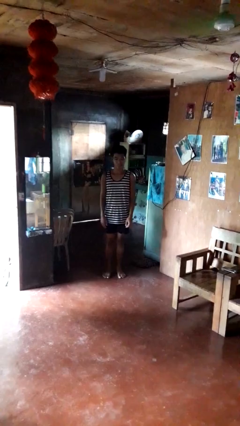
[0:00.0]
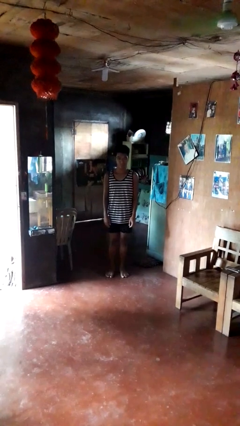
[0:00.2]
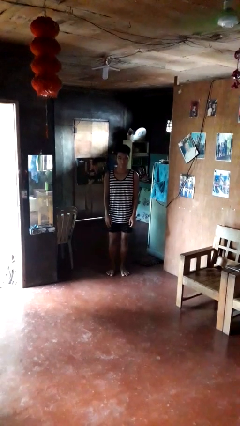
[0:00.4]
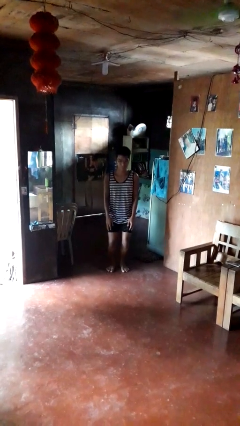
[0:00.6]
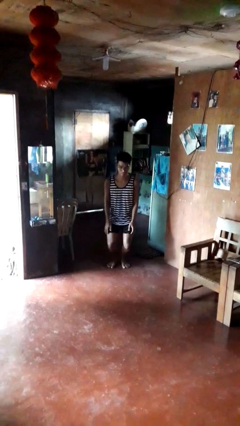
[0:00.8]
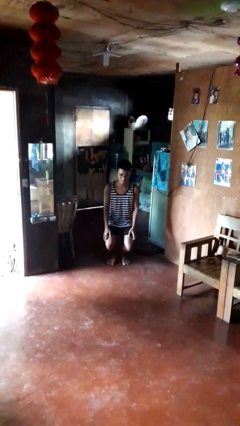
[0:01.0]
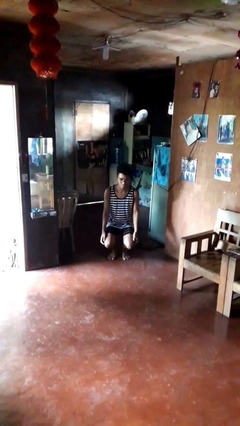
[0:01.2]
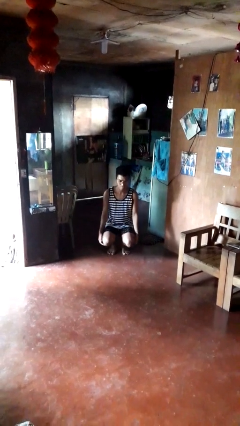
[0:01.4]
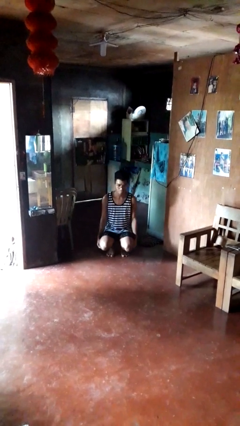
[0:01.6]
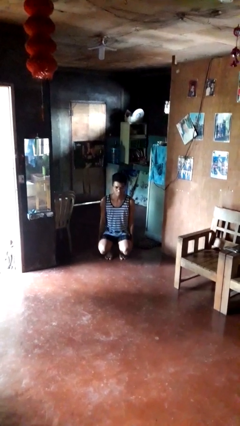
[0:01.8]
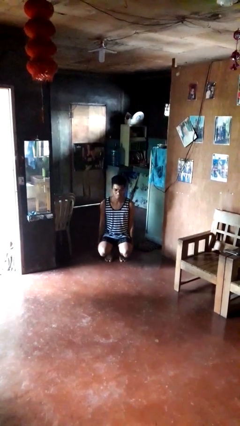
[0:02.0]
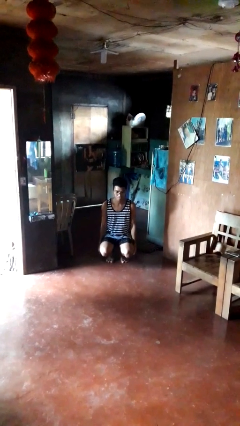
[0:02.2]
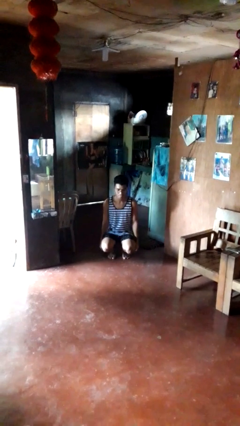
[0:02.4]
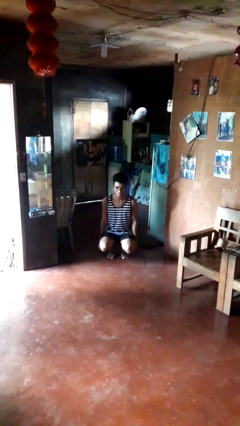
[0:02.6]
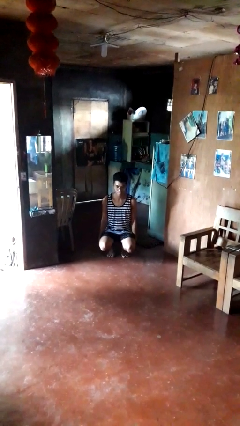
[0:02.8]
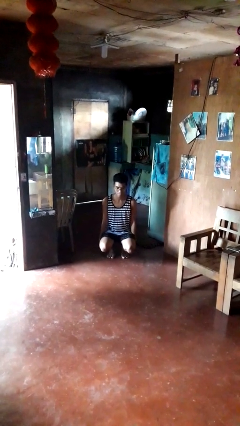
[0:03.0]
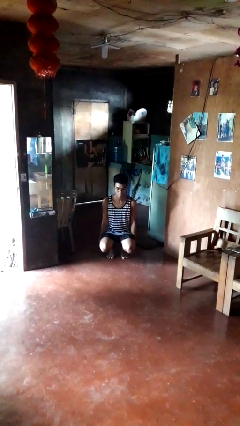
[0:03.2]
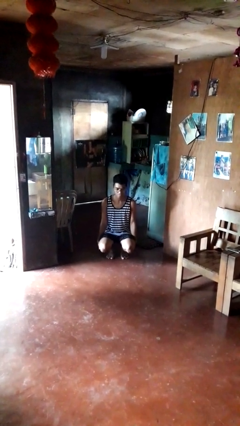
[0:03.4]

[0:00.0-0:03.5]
person squats

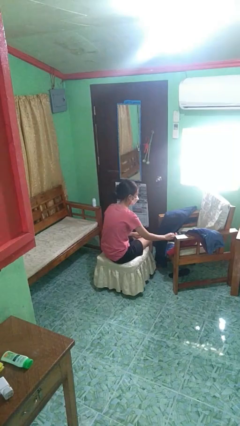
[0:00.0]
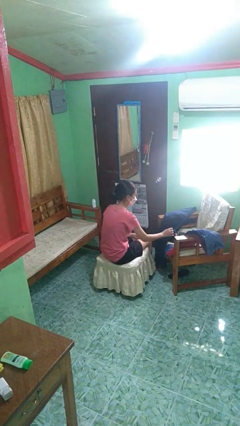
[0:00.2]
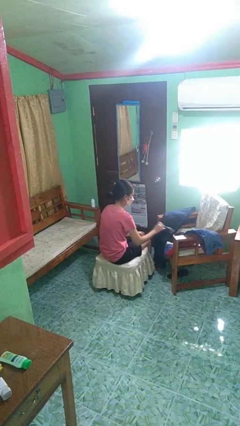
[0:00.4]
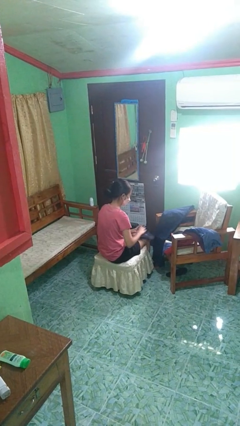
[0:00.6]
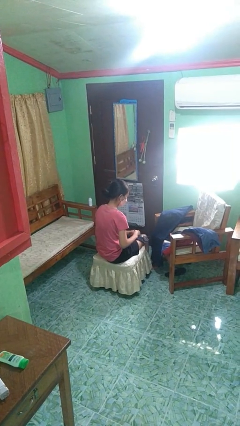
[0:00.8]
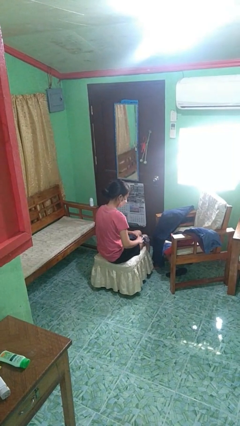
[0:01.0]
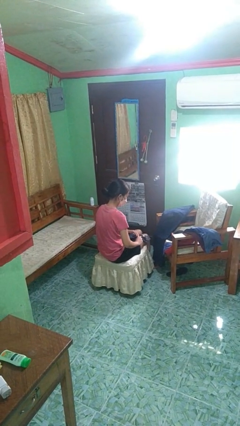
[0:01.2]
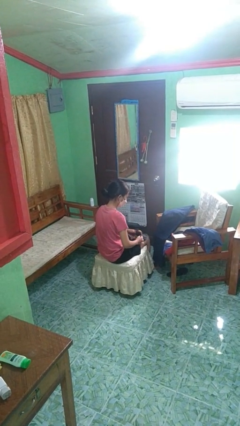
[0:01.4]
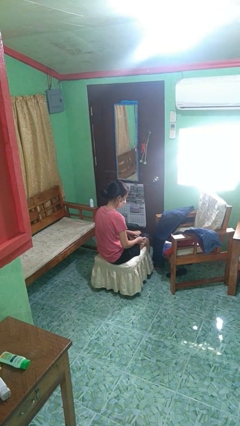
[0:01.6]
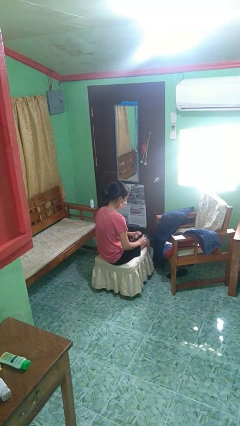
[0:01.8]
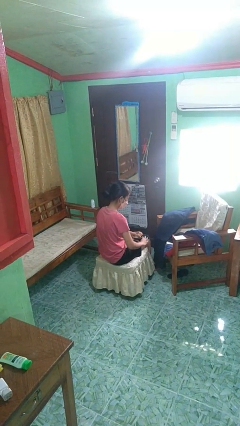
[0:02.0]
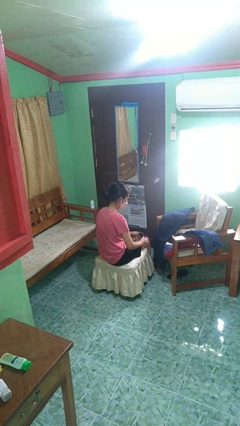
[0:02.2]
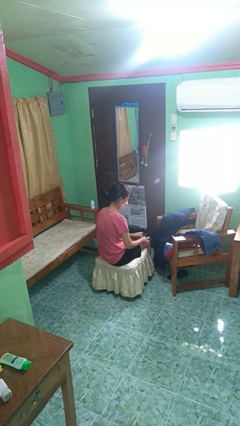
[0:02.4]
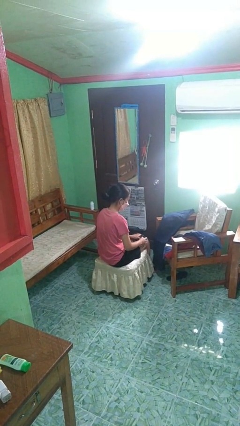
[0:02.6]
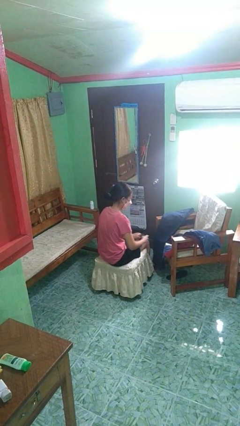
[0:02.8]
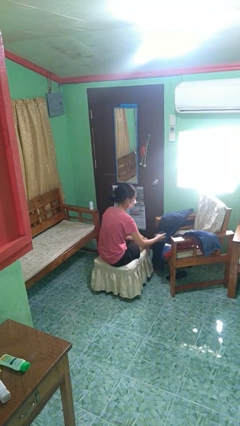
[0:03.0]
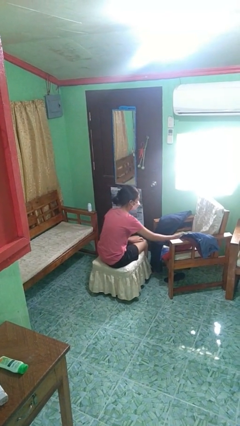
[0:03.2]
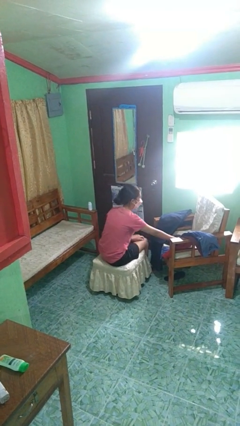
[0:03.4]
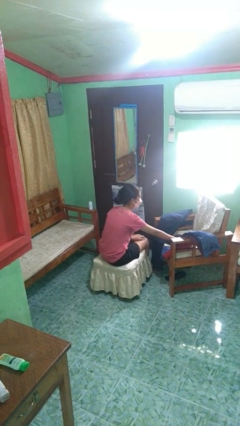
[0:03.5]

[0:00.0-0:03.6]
person folds socks

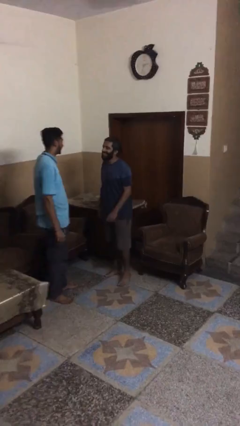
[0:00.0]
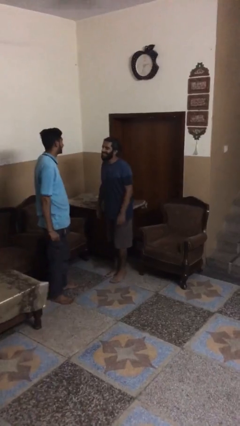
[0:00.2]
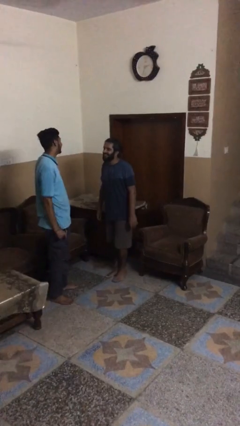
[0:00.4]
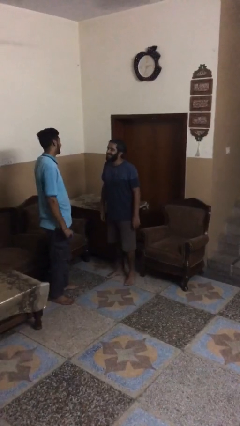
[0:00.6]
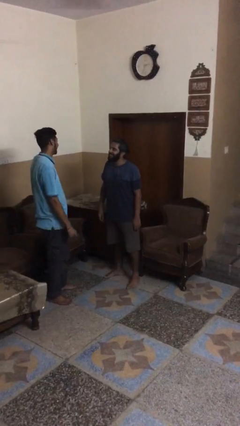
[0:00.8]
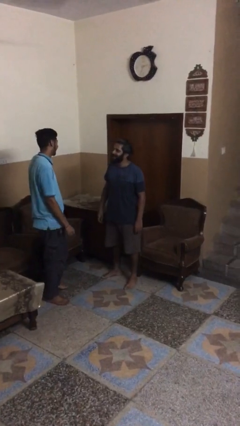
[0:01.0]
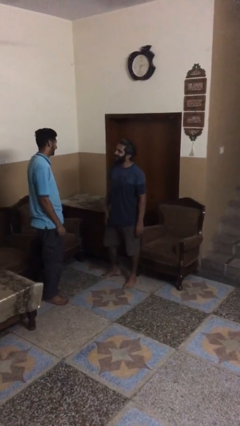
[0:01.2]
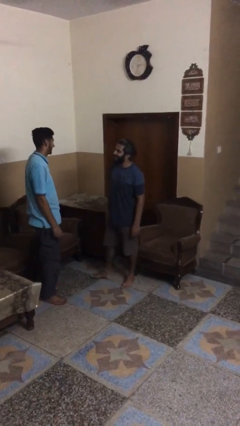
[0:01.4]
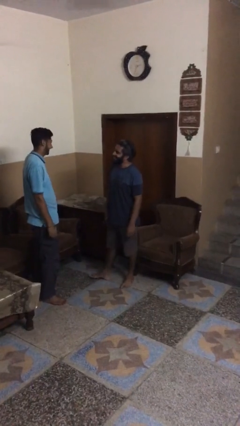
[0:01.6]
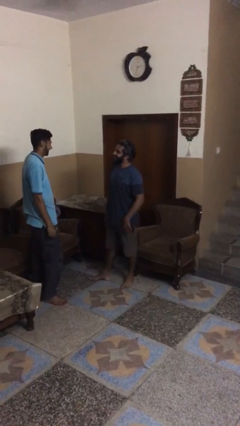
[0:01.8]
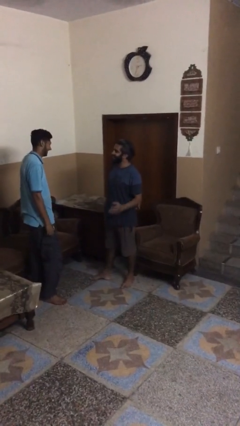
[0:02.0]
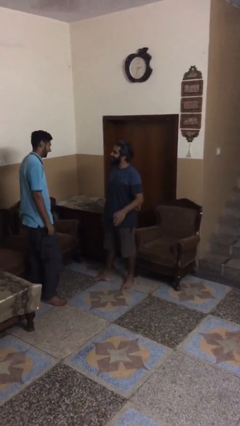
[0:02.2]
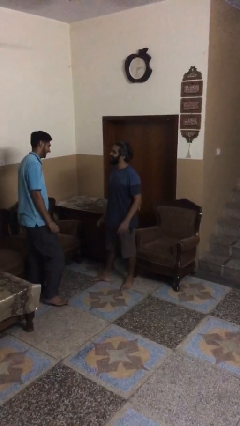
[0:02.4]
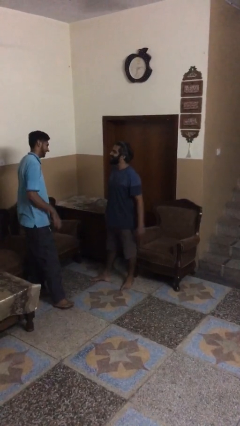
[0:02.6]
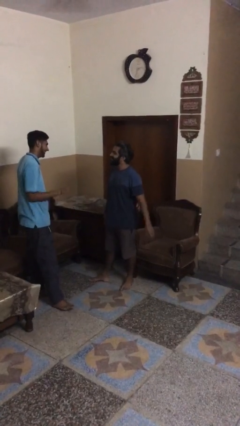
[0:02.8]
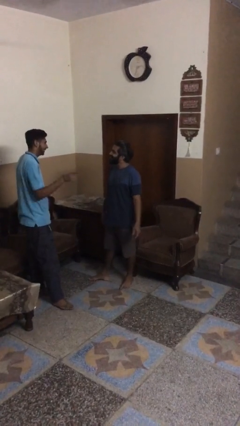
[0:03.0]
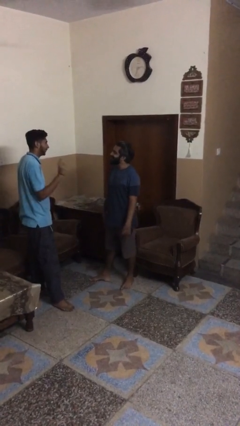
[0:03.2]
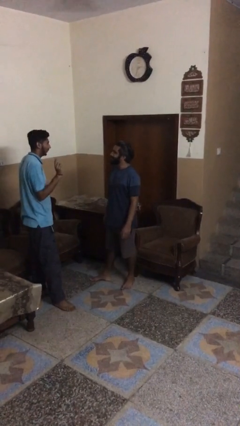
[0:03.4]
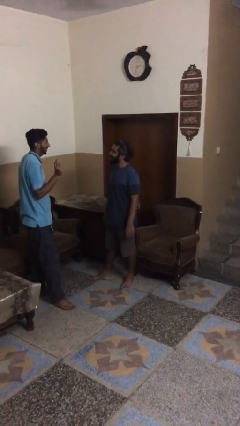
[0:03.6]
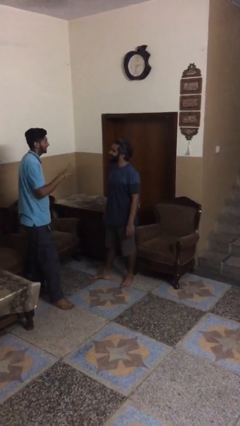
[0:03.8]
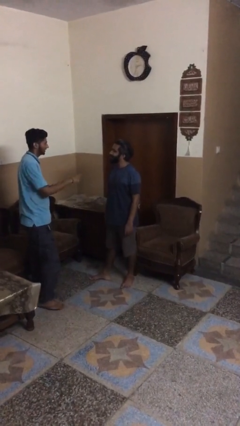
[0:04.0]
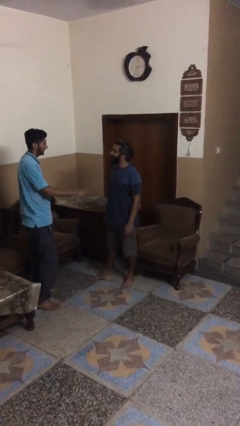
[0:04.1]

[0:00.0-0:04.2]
person talks to person

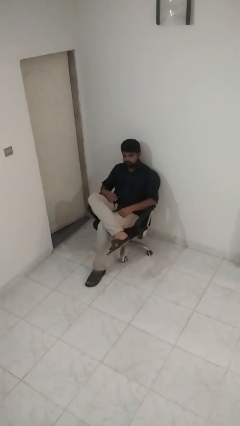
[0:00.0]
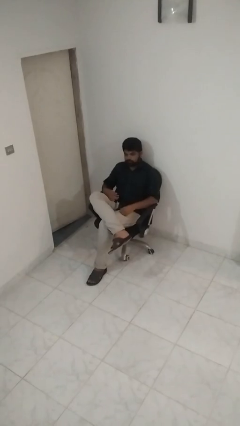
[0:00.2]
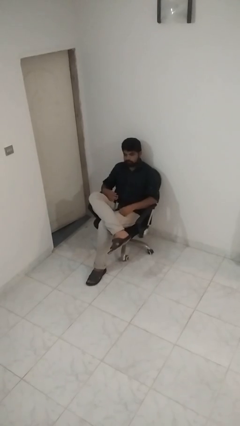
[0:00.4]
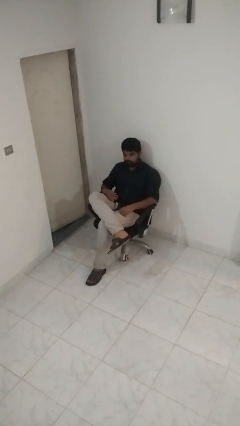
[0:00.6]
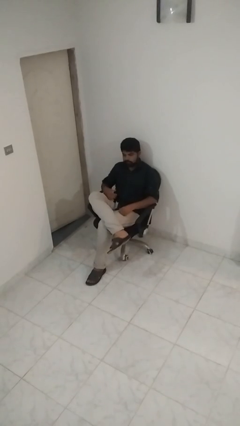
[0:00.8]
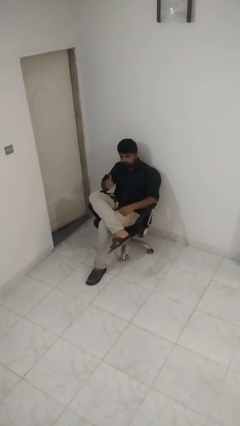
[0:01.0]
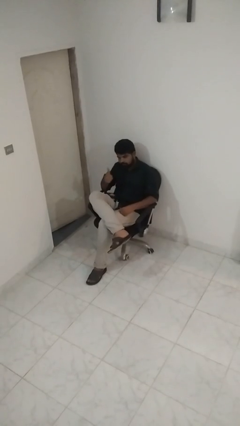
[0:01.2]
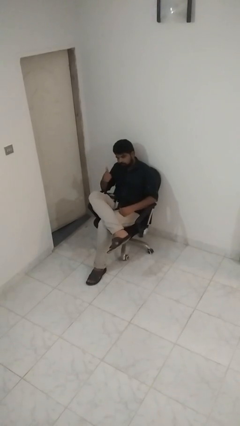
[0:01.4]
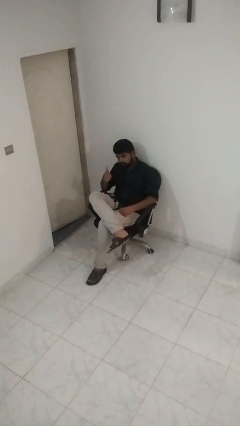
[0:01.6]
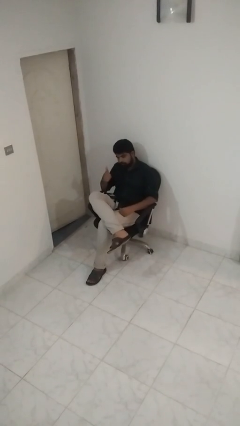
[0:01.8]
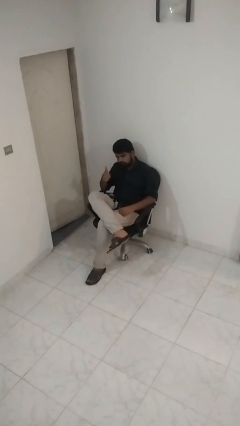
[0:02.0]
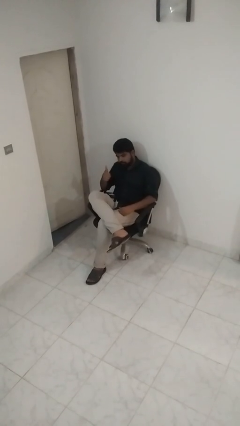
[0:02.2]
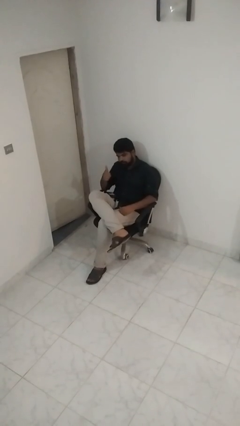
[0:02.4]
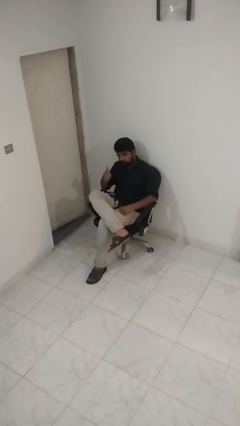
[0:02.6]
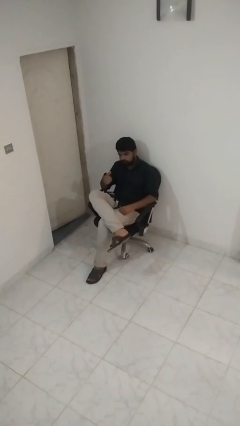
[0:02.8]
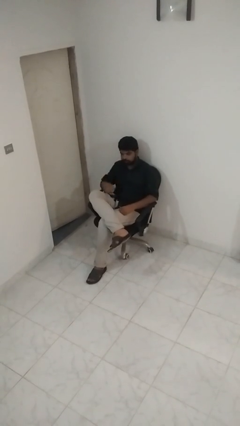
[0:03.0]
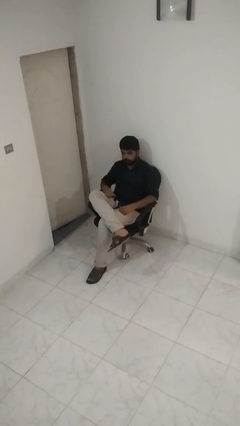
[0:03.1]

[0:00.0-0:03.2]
person gestures thumbs up

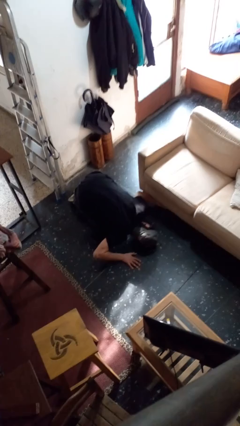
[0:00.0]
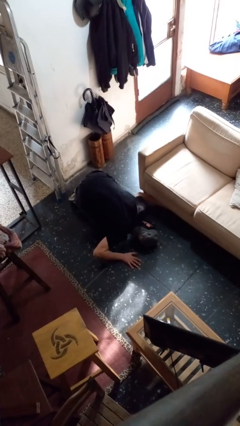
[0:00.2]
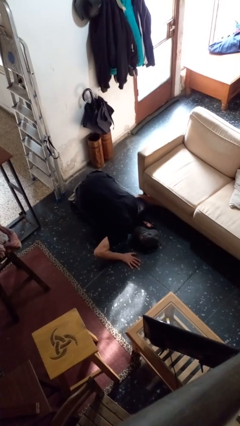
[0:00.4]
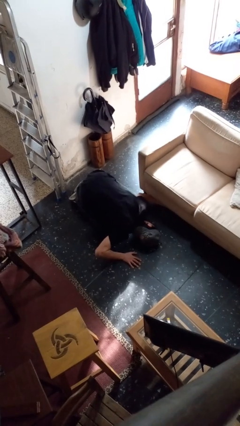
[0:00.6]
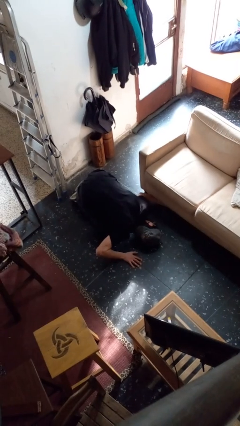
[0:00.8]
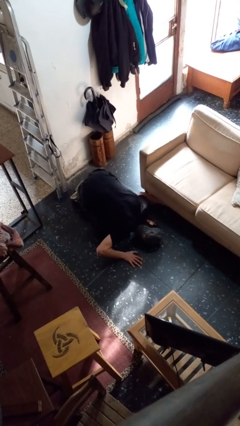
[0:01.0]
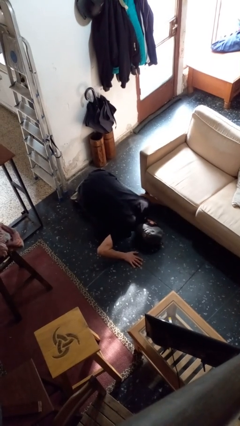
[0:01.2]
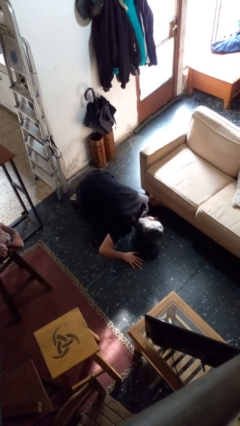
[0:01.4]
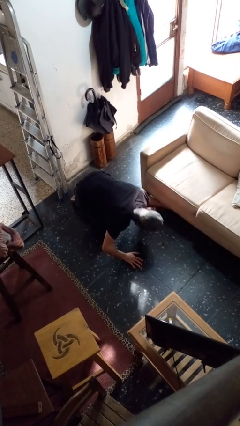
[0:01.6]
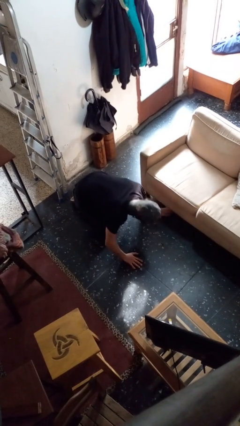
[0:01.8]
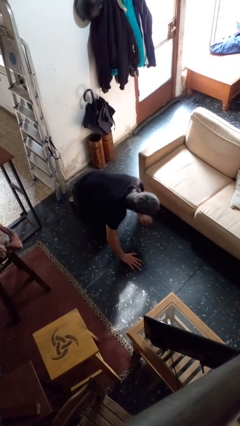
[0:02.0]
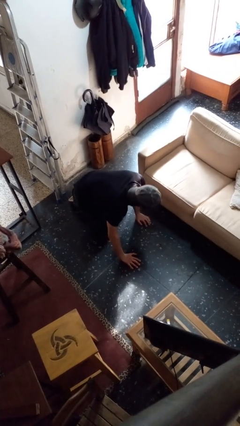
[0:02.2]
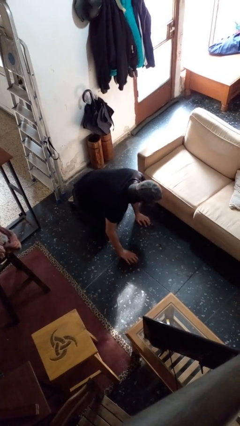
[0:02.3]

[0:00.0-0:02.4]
person searches under couch

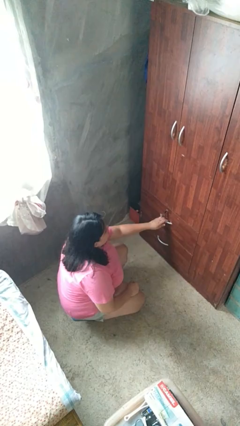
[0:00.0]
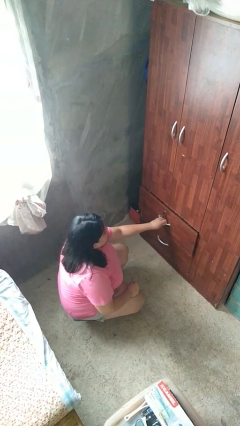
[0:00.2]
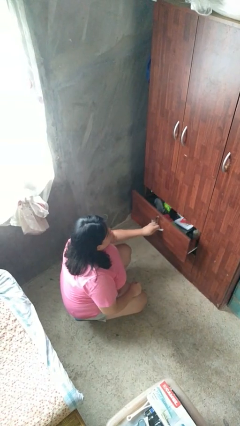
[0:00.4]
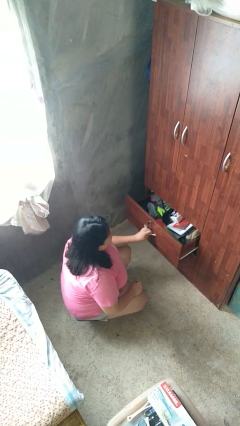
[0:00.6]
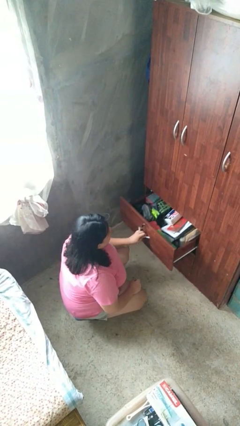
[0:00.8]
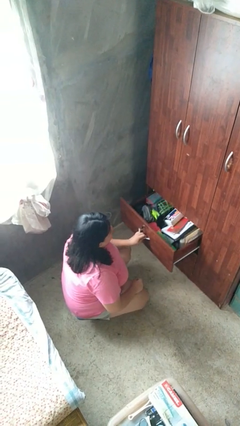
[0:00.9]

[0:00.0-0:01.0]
person opens dresser drawer
